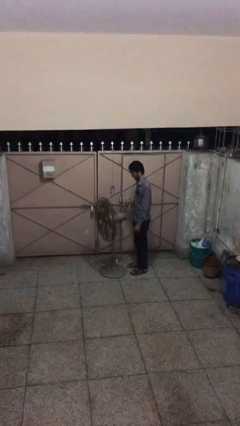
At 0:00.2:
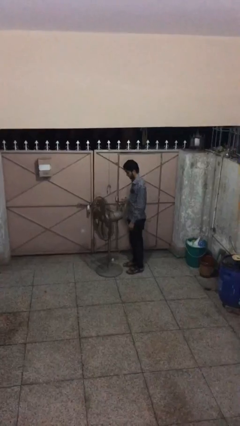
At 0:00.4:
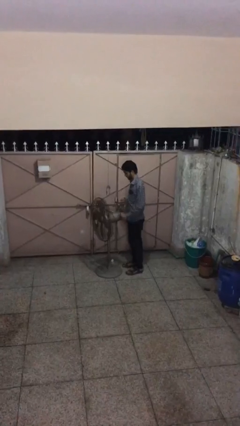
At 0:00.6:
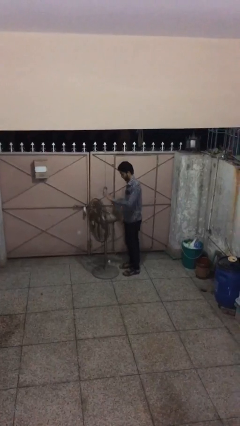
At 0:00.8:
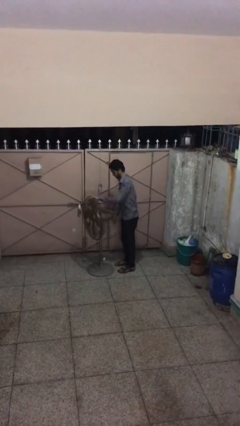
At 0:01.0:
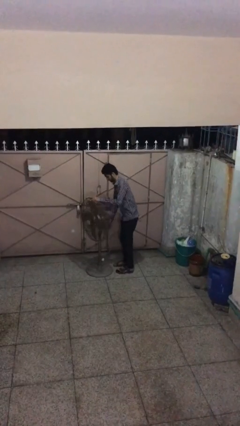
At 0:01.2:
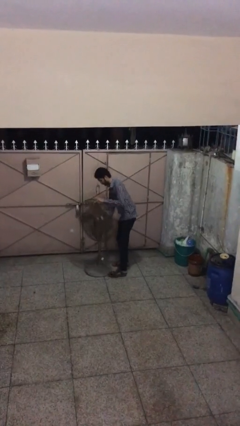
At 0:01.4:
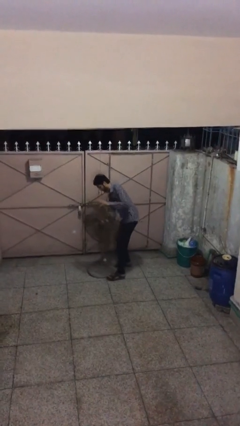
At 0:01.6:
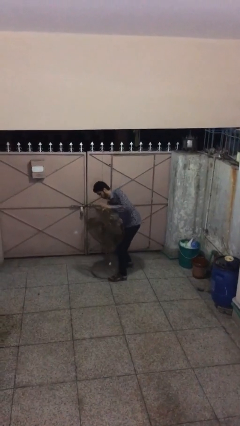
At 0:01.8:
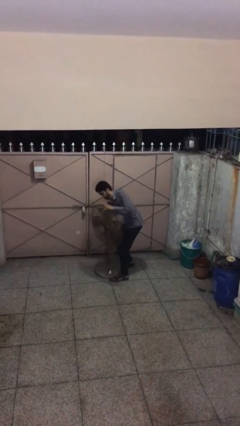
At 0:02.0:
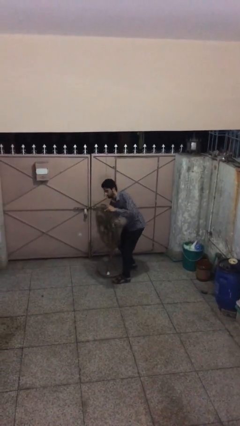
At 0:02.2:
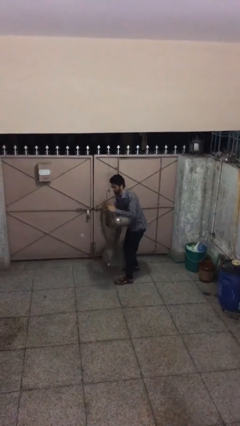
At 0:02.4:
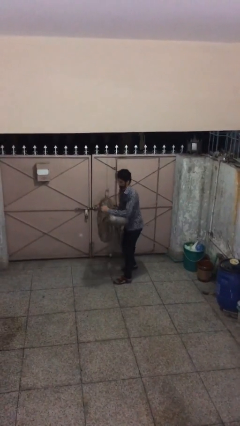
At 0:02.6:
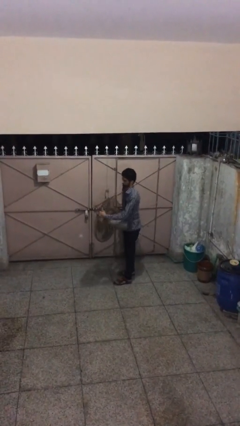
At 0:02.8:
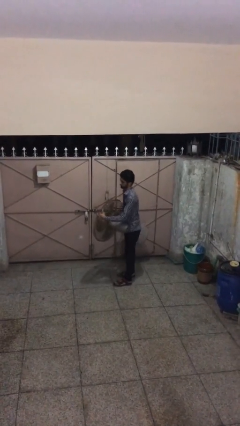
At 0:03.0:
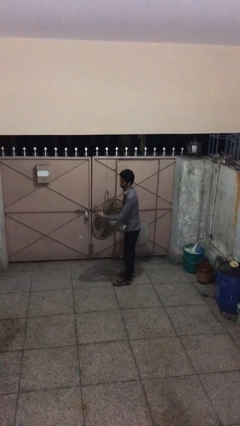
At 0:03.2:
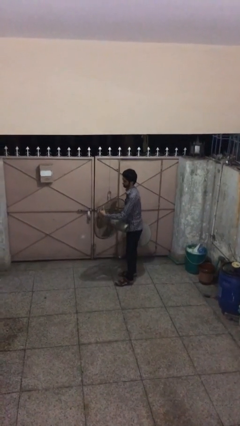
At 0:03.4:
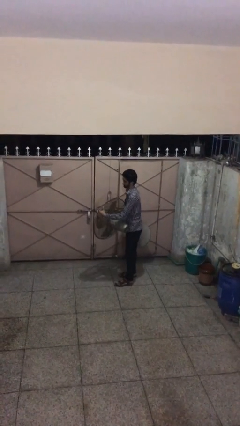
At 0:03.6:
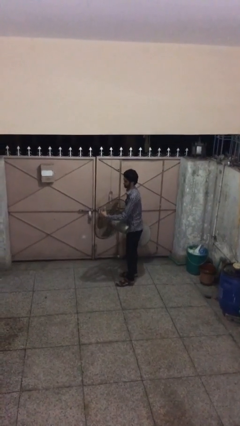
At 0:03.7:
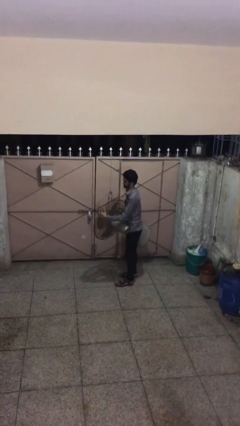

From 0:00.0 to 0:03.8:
person picks up object from floor

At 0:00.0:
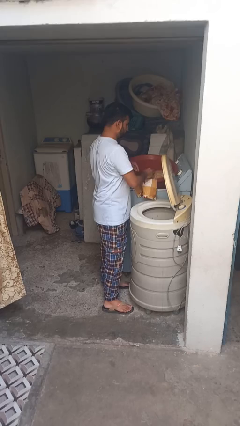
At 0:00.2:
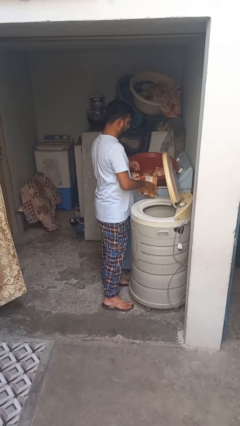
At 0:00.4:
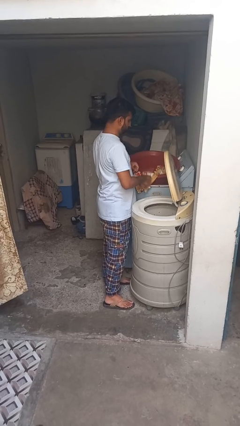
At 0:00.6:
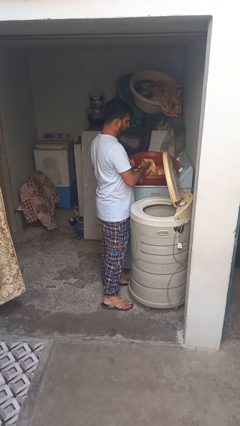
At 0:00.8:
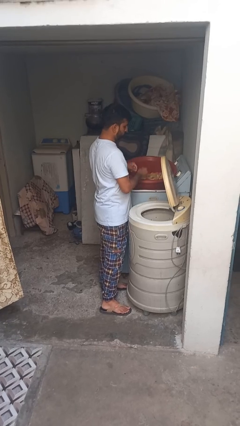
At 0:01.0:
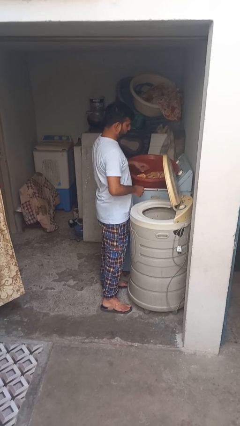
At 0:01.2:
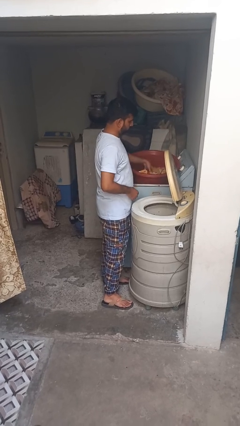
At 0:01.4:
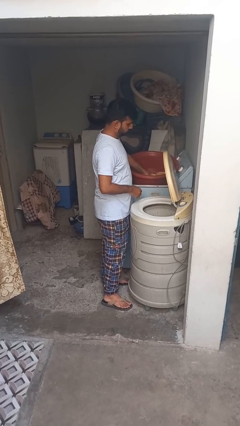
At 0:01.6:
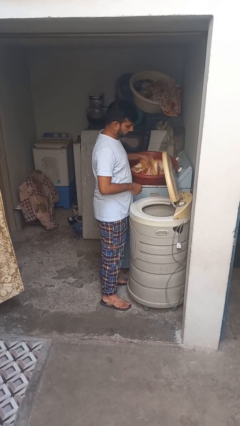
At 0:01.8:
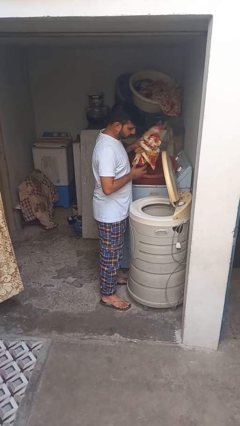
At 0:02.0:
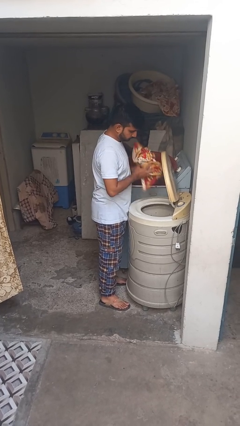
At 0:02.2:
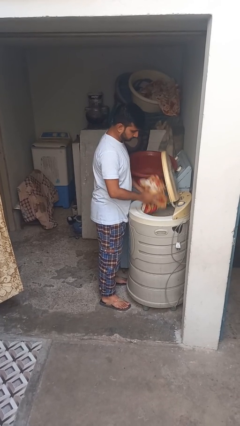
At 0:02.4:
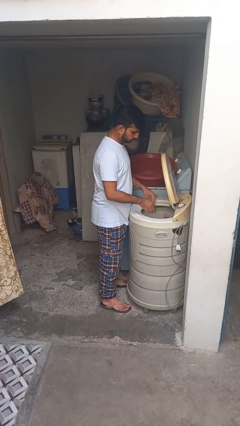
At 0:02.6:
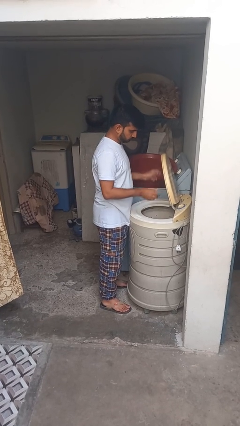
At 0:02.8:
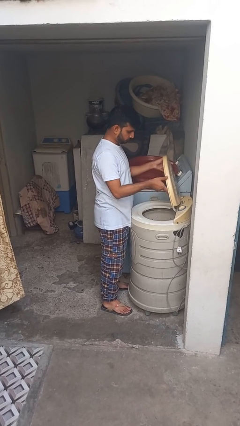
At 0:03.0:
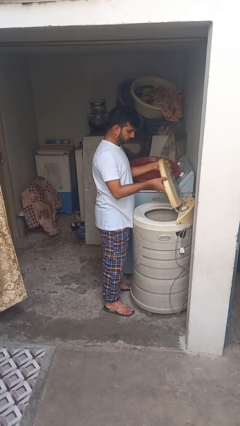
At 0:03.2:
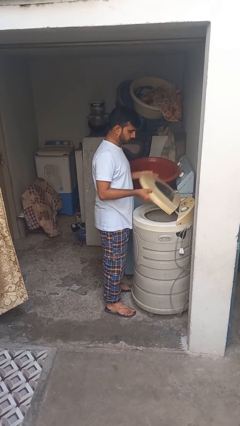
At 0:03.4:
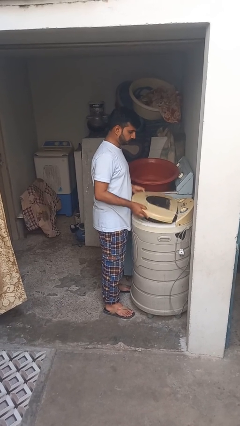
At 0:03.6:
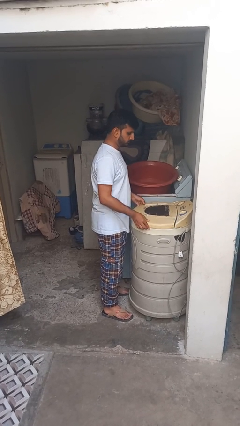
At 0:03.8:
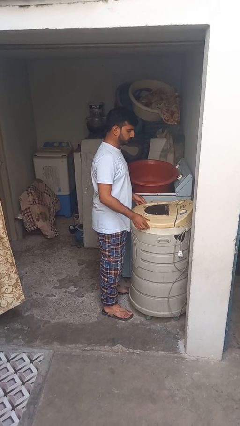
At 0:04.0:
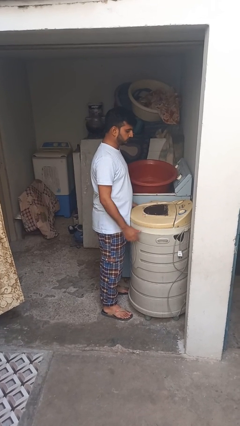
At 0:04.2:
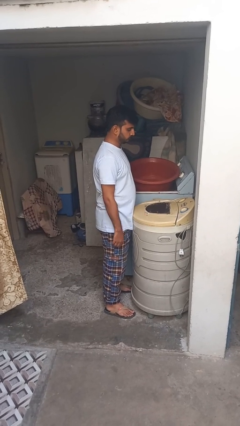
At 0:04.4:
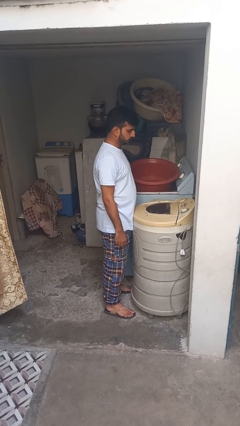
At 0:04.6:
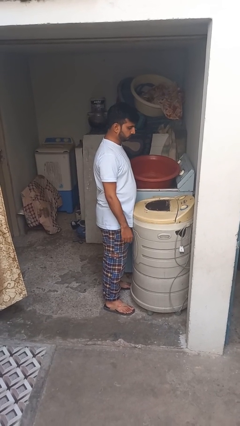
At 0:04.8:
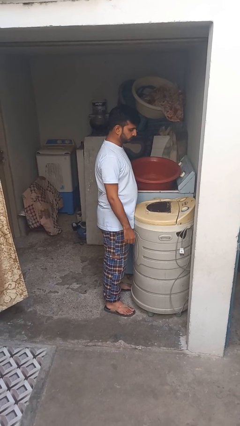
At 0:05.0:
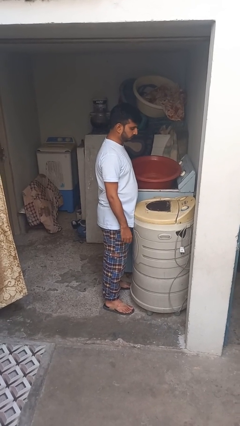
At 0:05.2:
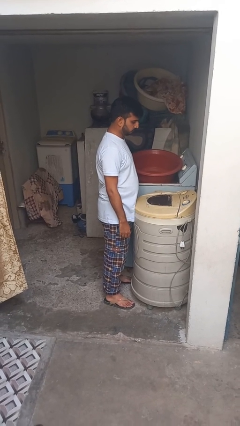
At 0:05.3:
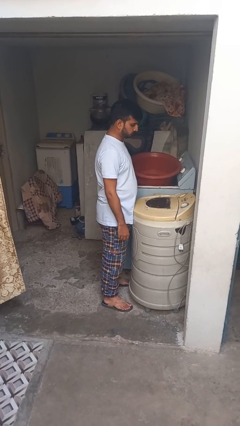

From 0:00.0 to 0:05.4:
person loads clotheswasher

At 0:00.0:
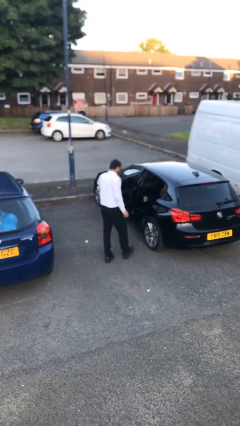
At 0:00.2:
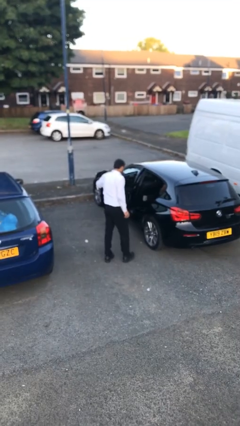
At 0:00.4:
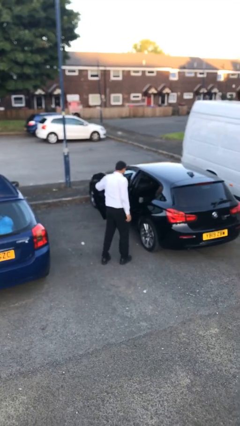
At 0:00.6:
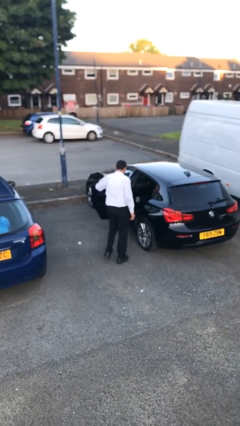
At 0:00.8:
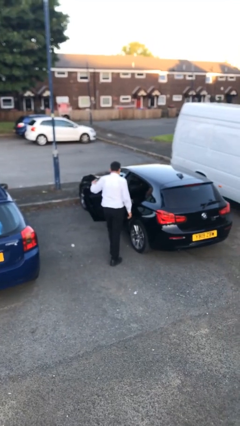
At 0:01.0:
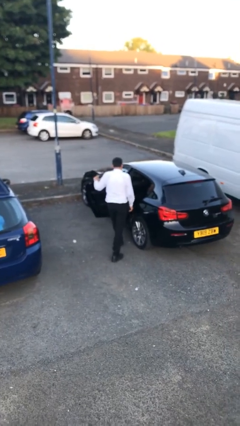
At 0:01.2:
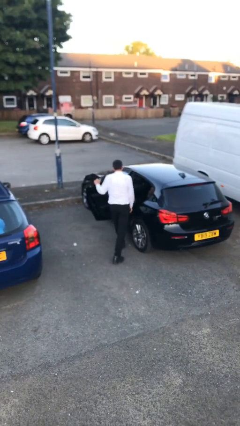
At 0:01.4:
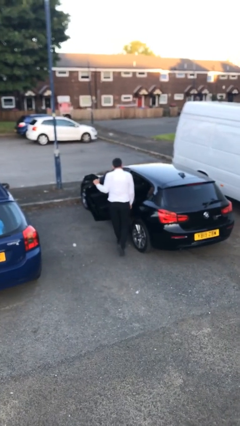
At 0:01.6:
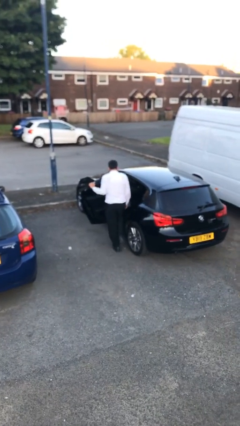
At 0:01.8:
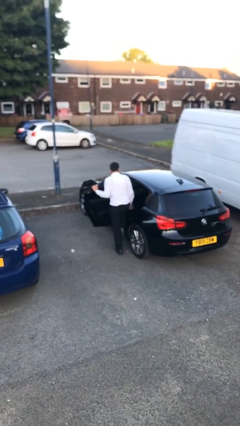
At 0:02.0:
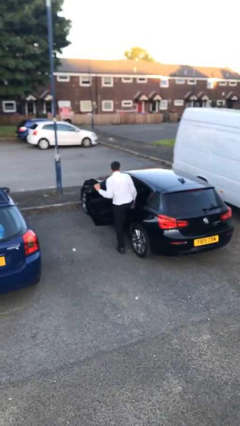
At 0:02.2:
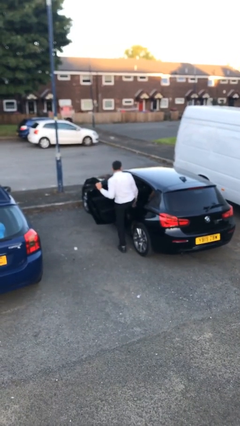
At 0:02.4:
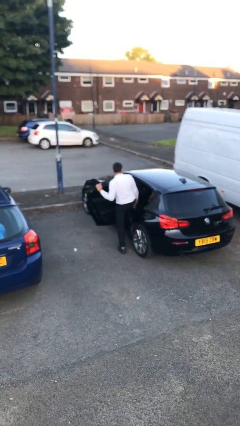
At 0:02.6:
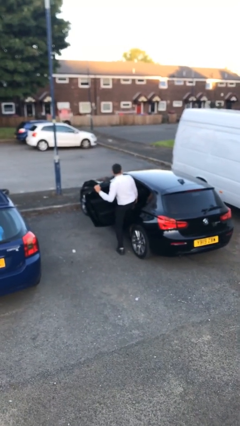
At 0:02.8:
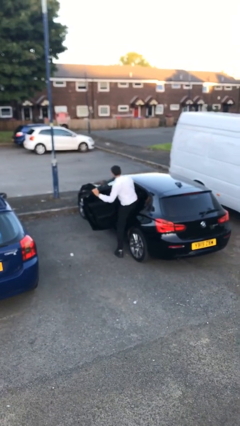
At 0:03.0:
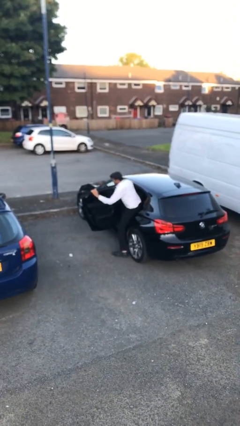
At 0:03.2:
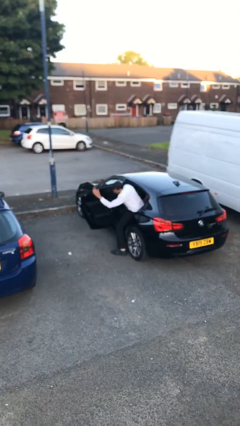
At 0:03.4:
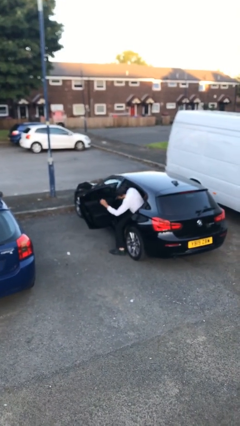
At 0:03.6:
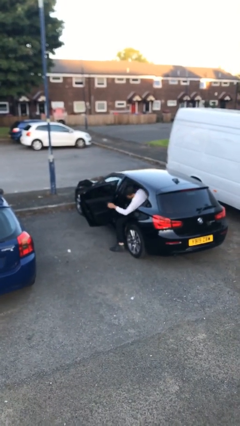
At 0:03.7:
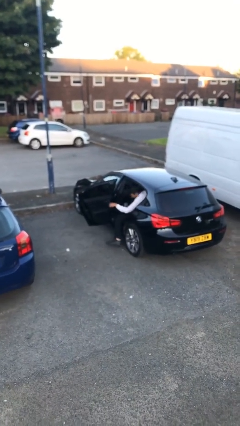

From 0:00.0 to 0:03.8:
person enters car

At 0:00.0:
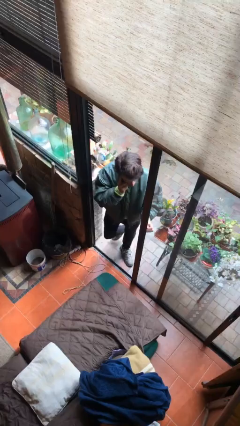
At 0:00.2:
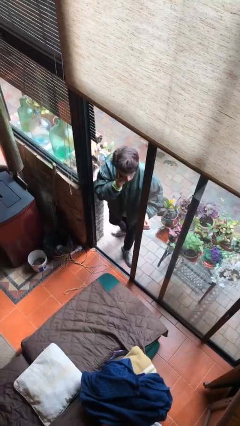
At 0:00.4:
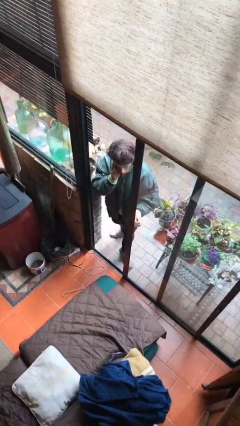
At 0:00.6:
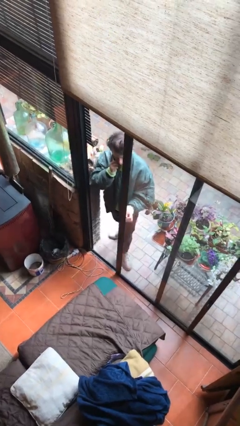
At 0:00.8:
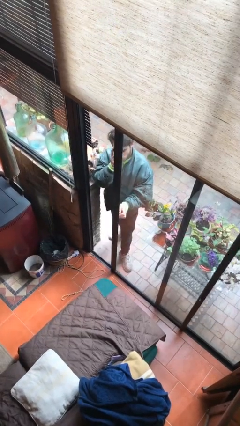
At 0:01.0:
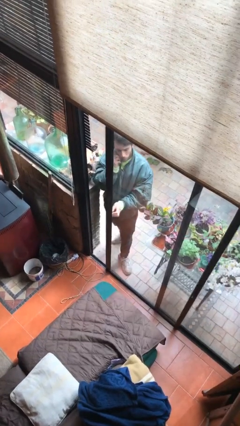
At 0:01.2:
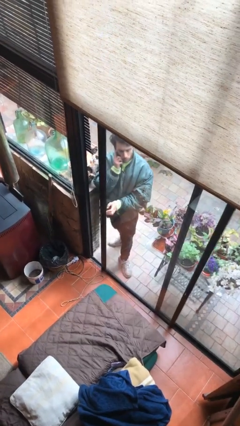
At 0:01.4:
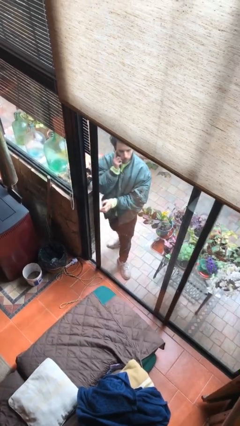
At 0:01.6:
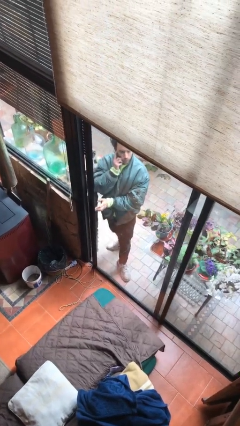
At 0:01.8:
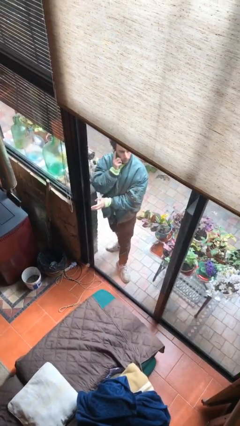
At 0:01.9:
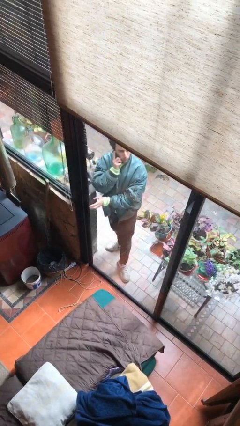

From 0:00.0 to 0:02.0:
person closes facility door

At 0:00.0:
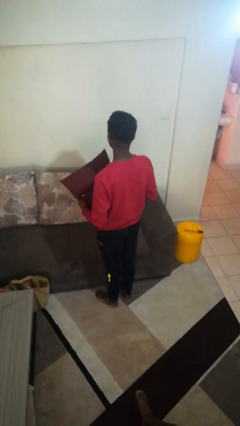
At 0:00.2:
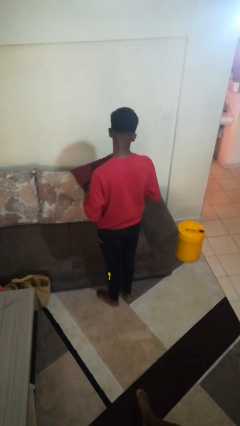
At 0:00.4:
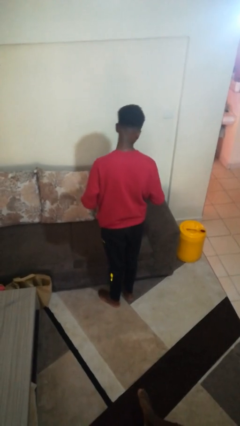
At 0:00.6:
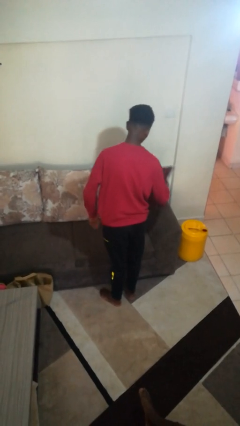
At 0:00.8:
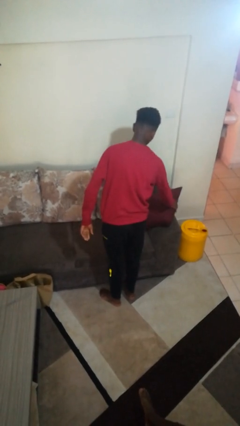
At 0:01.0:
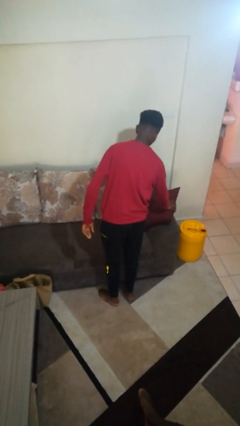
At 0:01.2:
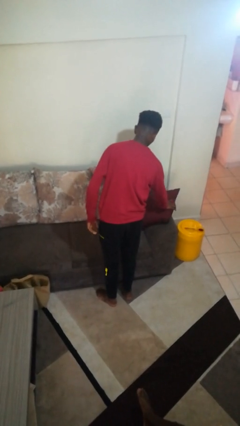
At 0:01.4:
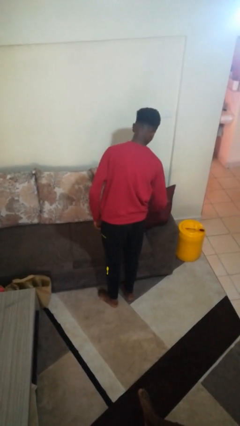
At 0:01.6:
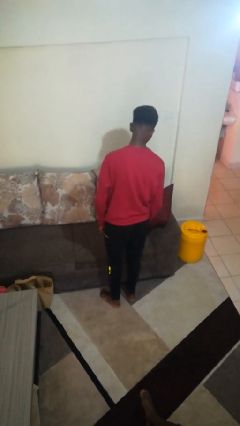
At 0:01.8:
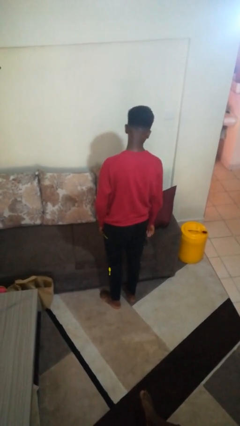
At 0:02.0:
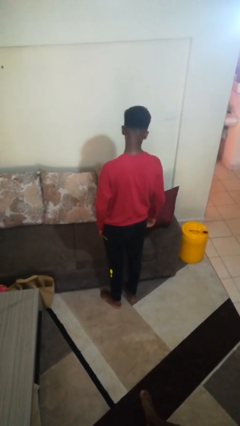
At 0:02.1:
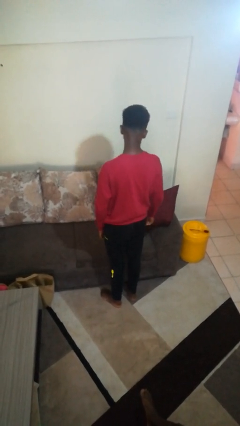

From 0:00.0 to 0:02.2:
person puts down object on couch

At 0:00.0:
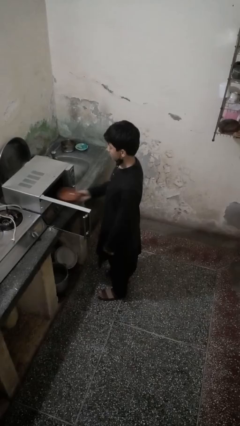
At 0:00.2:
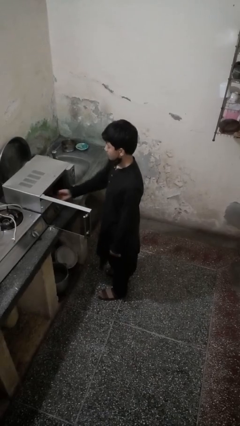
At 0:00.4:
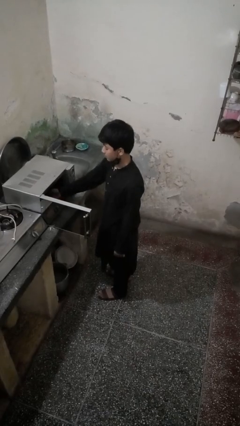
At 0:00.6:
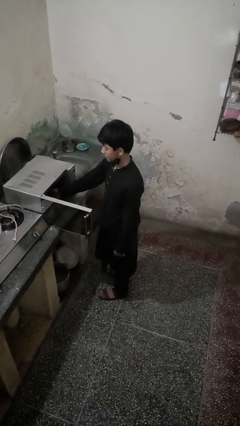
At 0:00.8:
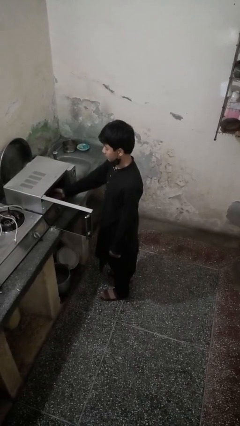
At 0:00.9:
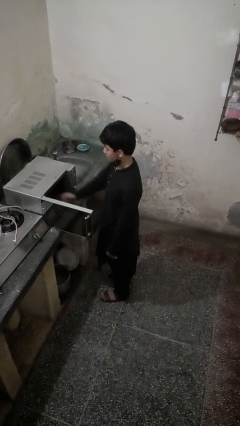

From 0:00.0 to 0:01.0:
person puts object into microwave
